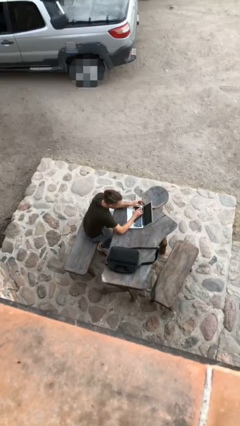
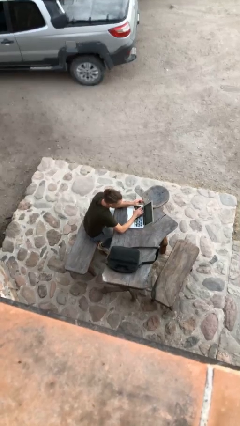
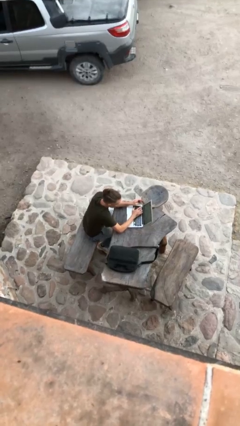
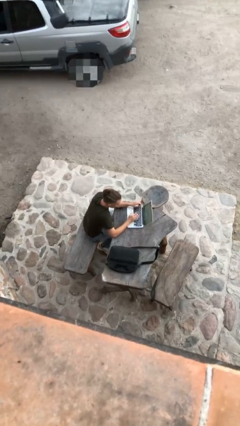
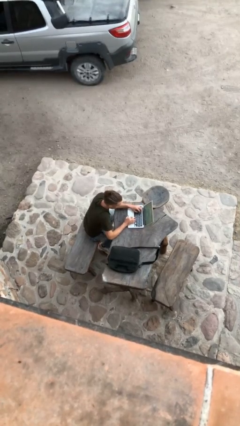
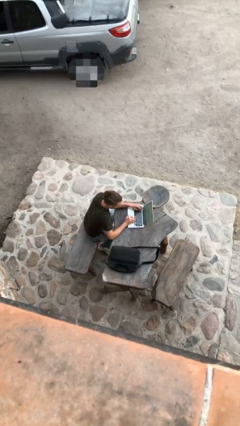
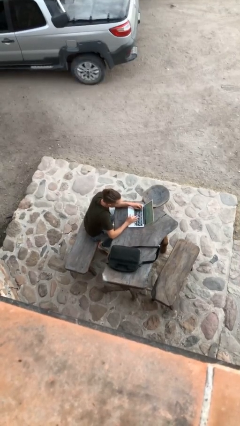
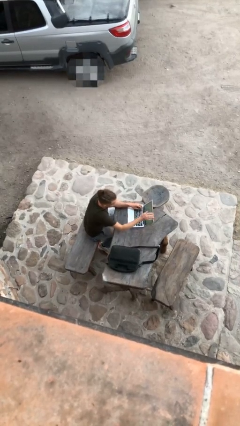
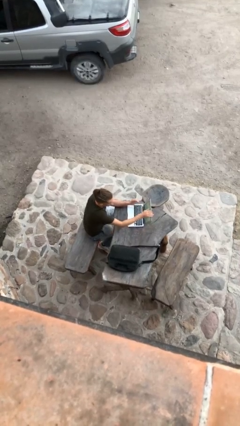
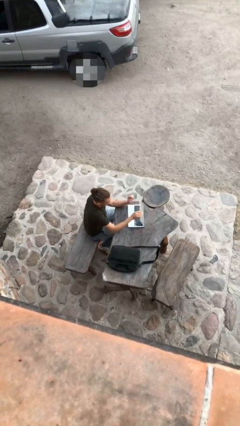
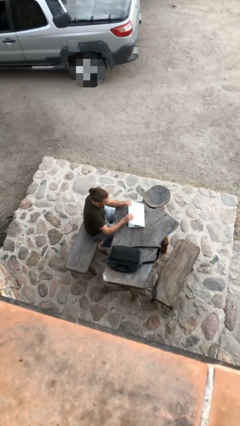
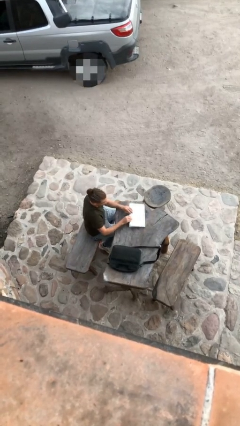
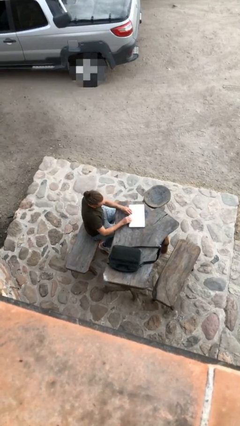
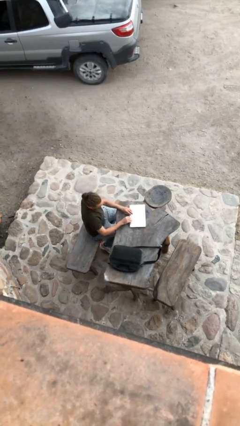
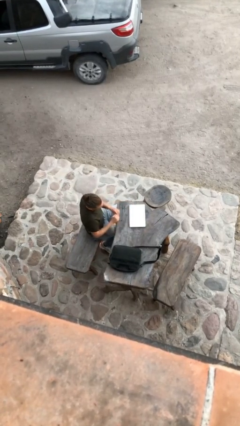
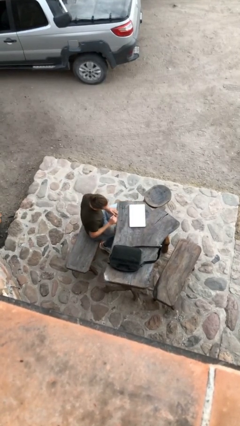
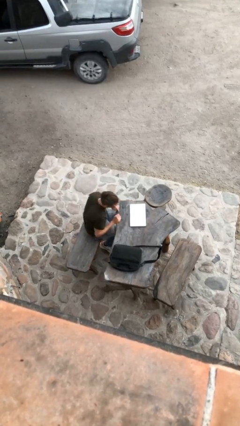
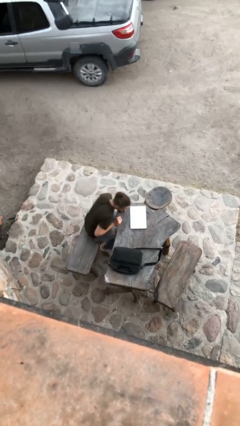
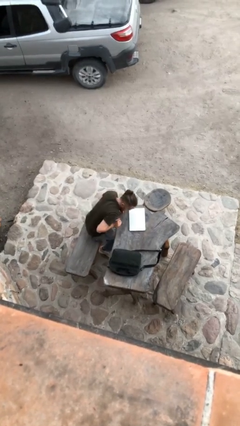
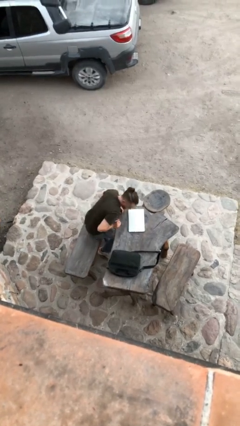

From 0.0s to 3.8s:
person interacts with laptop

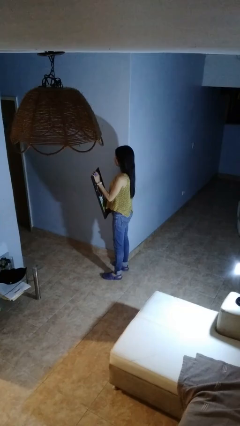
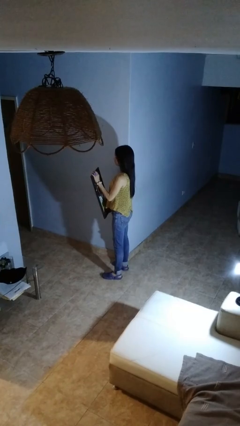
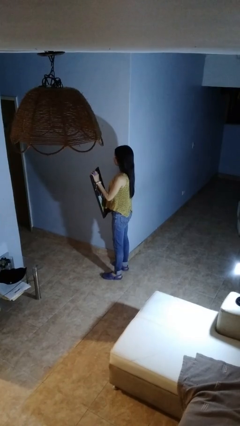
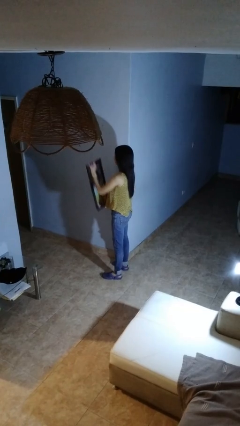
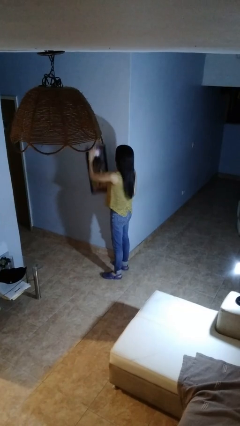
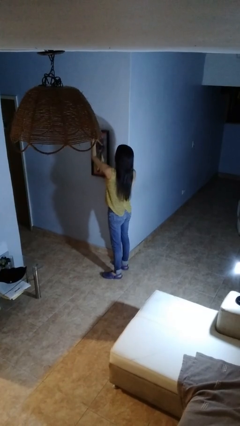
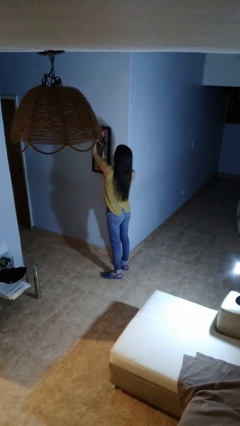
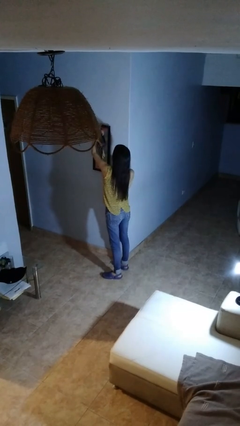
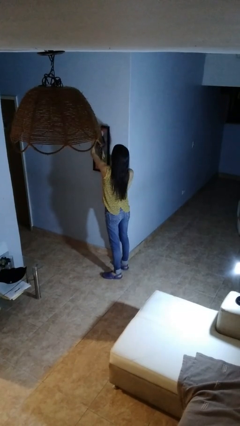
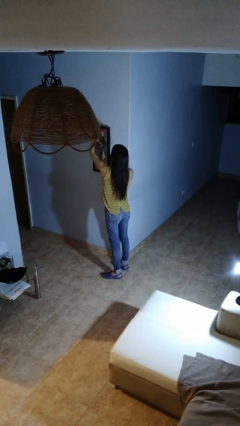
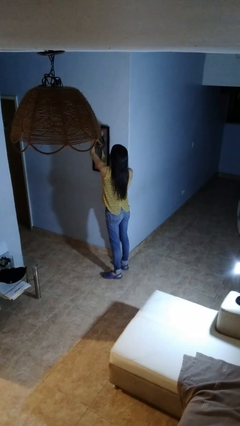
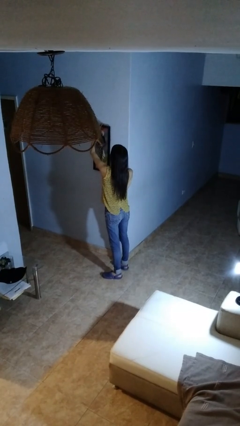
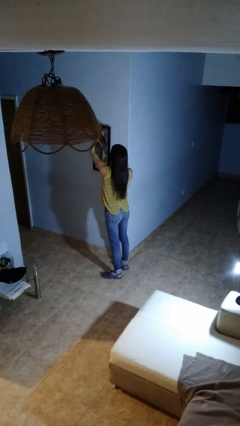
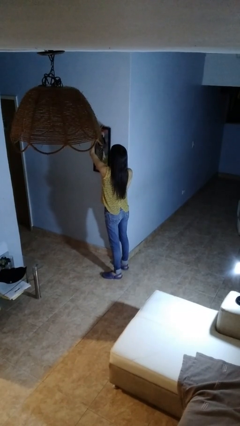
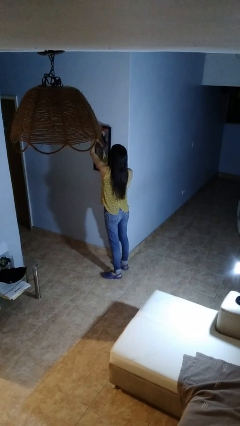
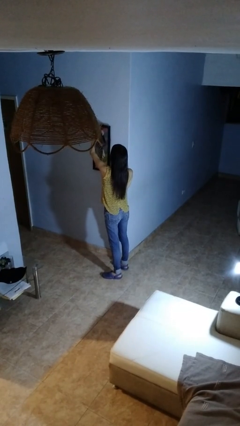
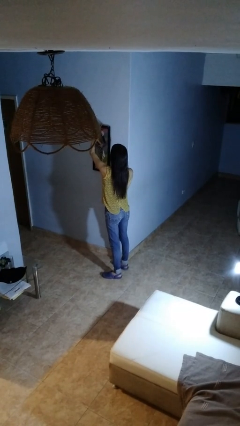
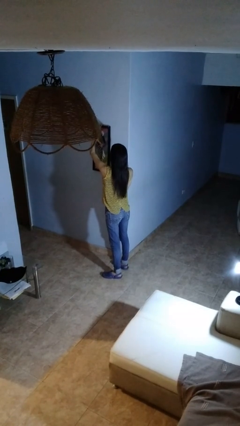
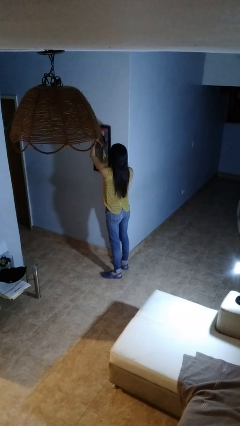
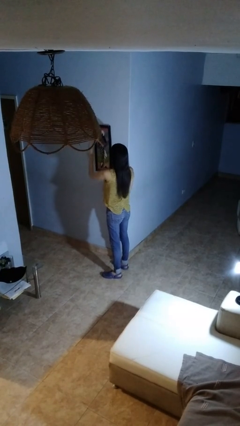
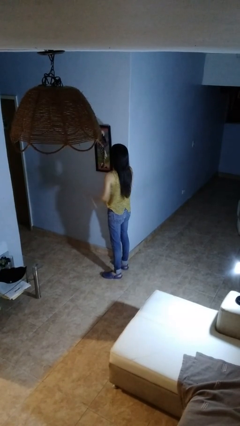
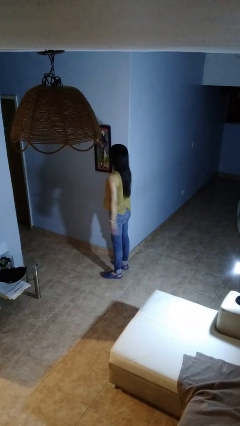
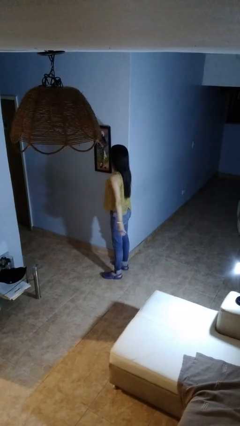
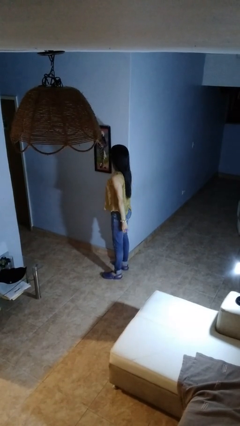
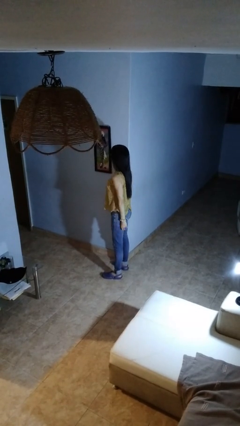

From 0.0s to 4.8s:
person puts up picture frame

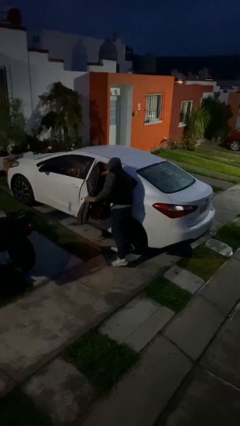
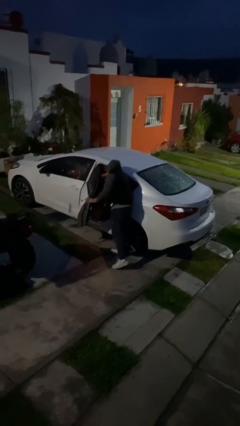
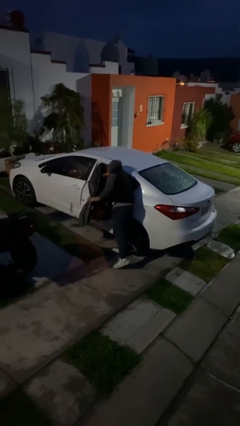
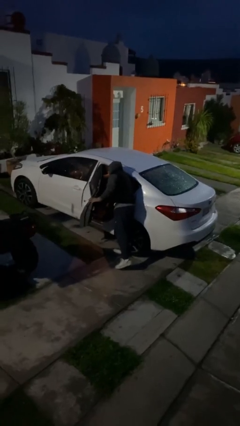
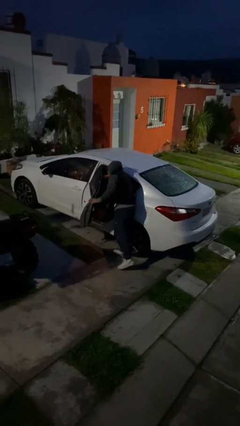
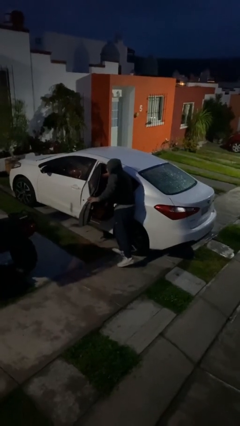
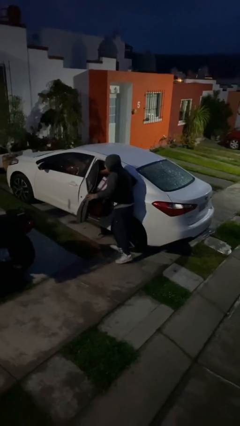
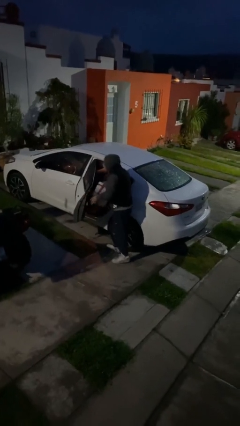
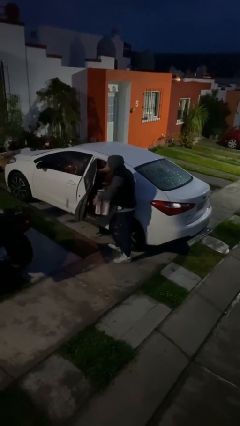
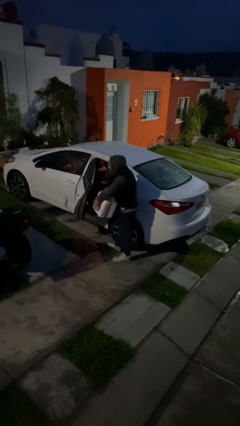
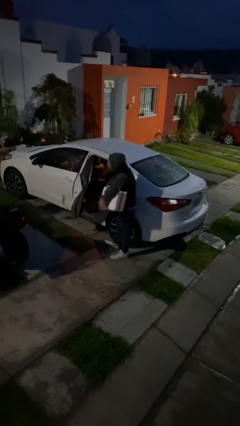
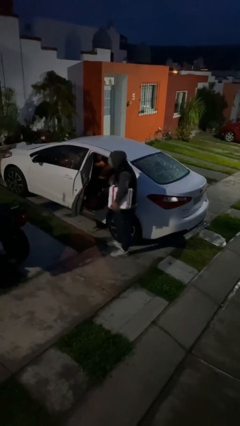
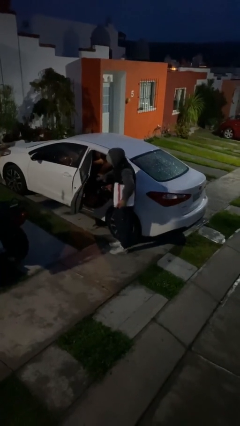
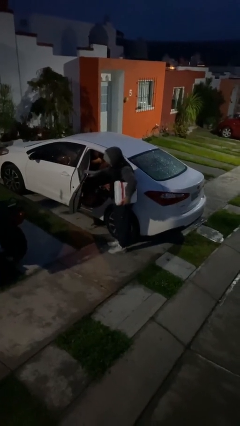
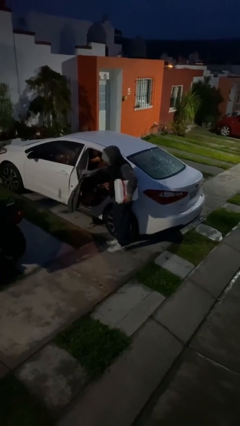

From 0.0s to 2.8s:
person unloads car

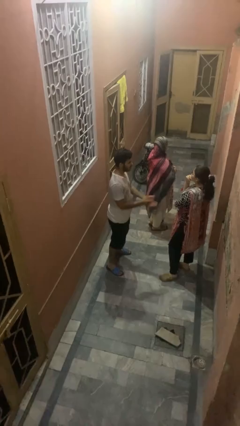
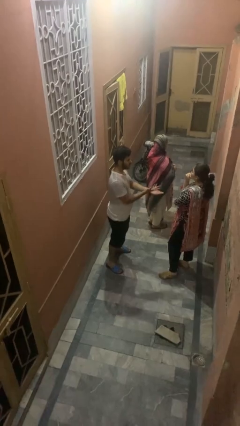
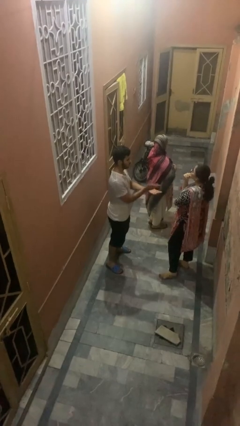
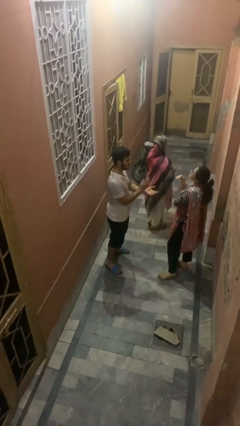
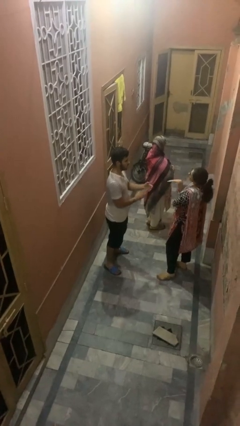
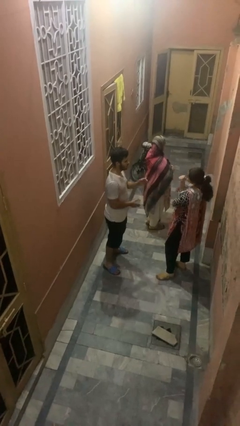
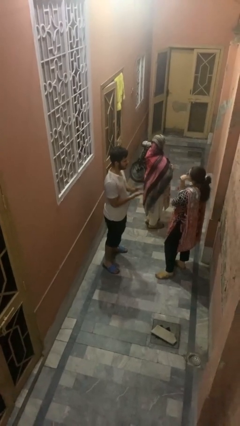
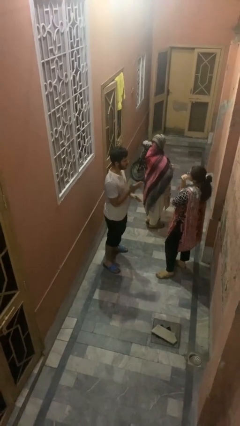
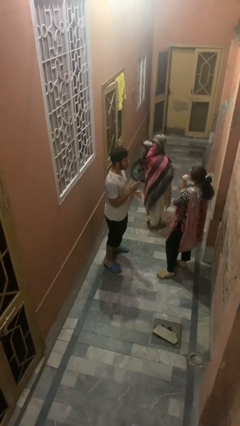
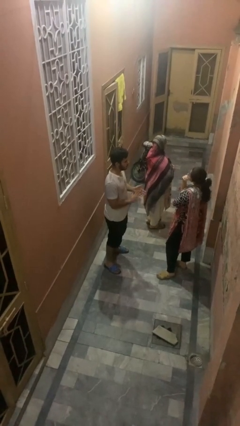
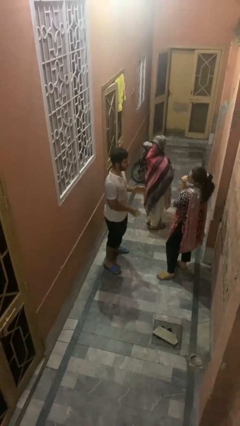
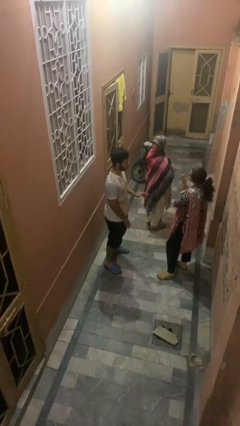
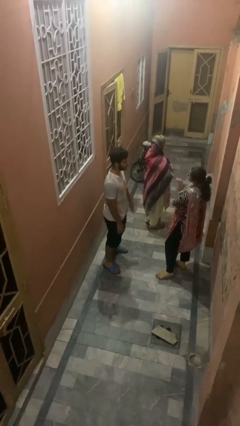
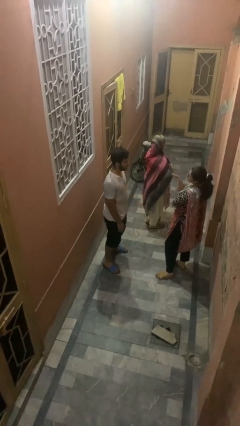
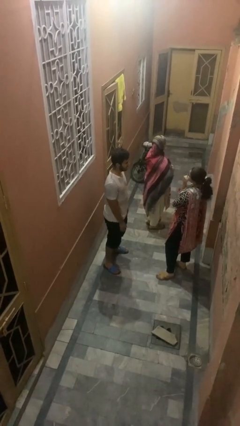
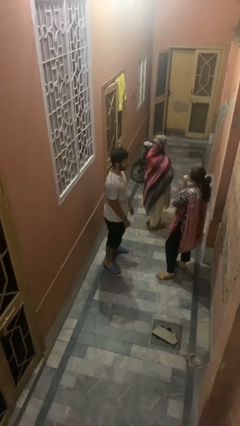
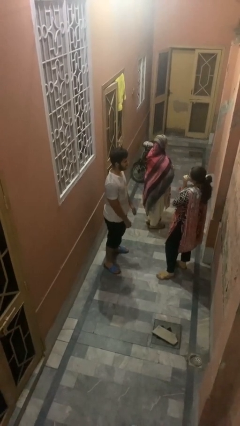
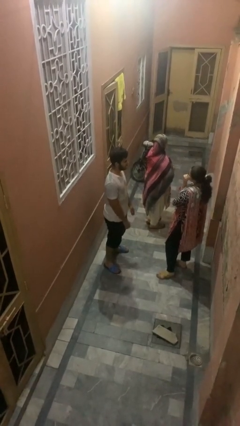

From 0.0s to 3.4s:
person talks to person

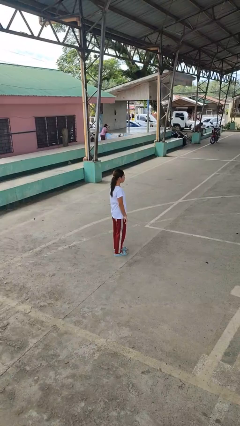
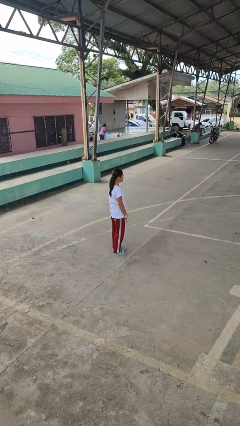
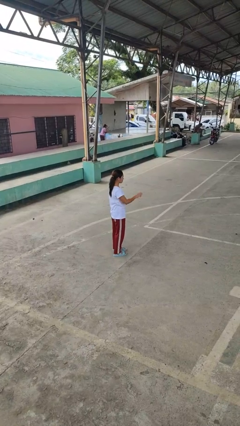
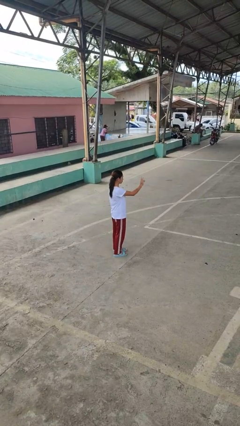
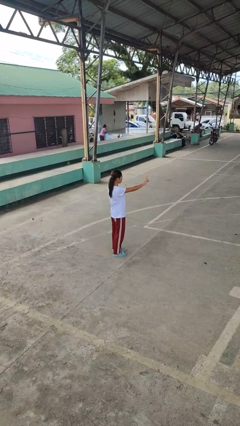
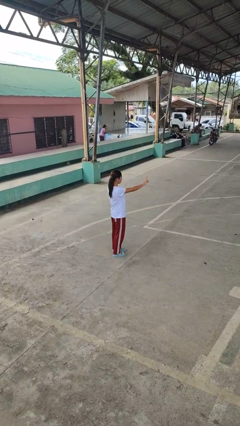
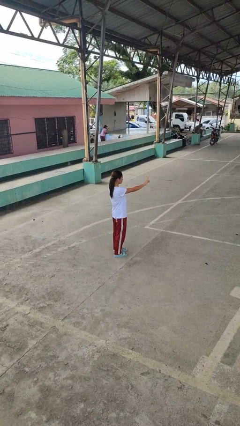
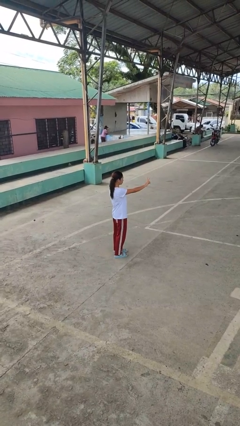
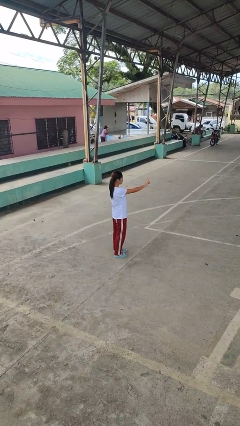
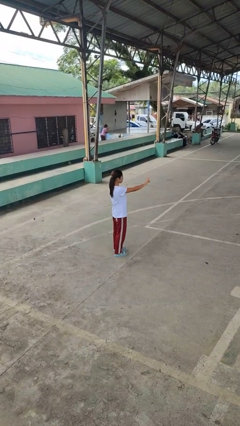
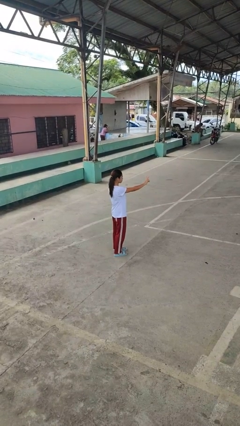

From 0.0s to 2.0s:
person gestures peace

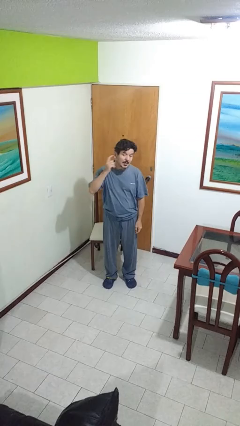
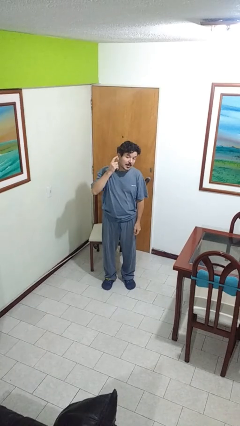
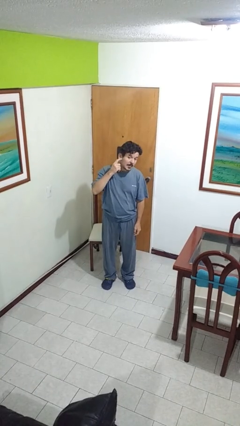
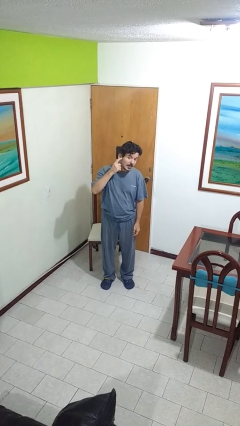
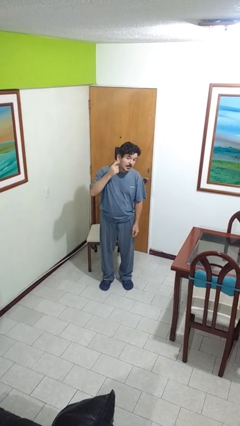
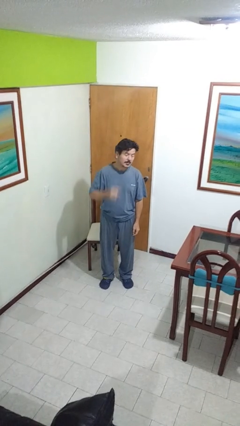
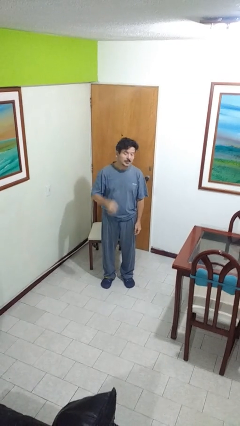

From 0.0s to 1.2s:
person gestures listen closely
